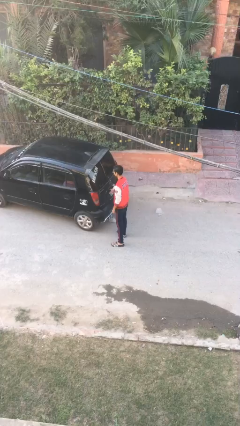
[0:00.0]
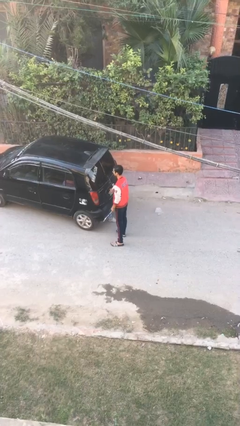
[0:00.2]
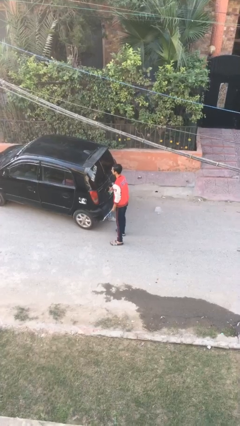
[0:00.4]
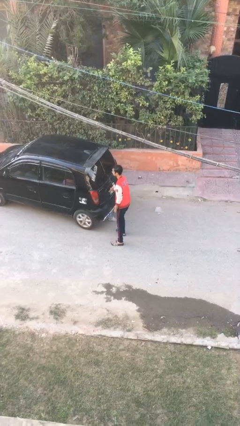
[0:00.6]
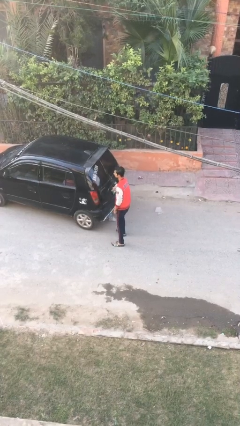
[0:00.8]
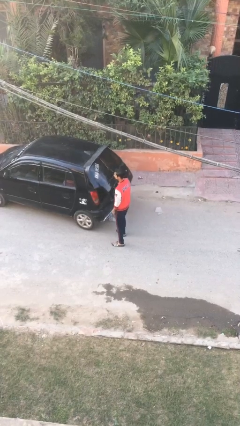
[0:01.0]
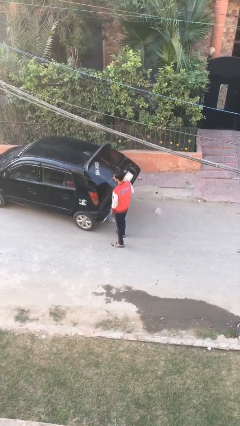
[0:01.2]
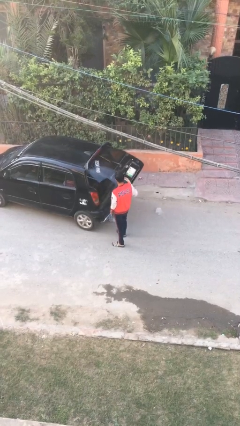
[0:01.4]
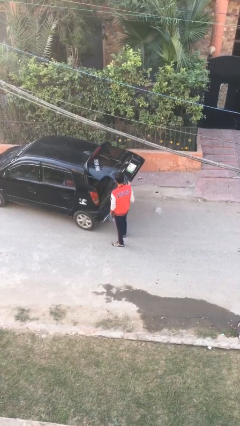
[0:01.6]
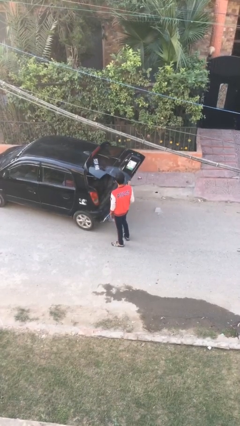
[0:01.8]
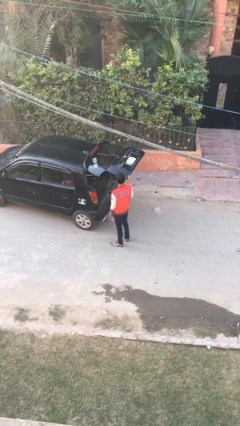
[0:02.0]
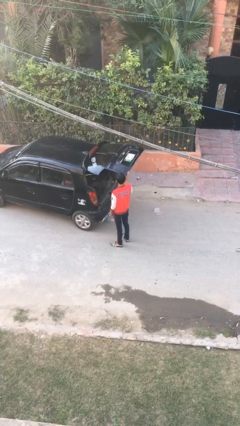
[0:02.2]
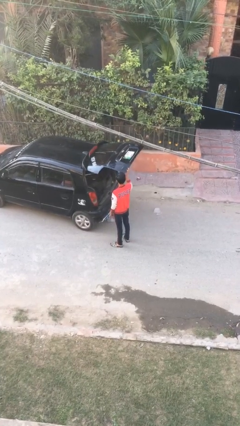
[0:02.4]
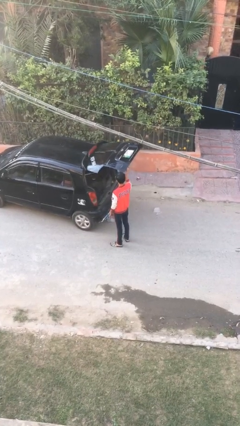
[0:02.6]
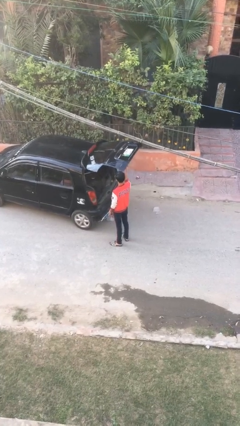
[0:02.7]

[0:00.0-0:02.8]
person opens car trunk

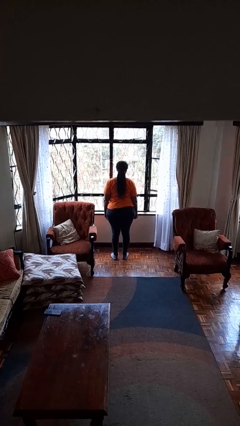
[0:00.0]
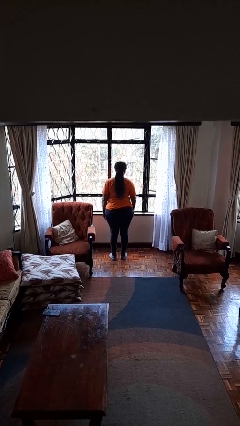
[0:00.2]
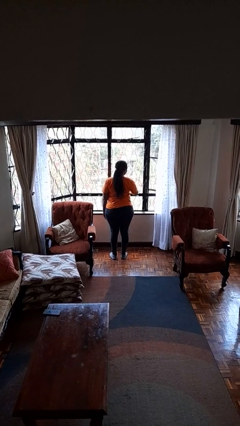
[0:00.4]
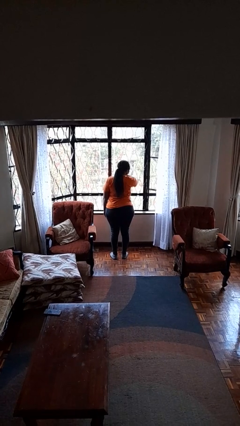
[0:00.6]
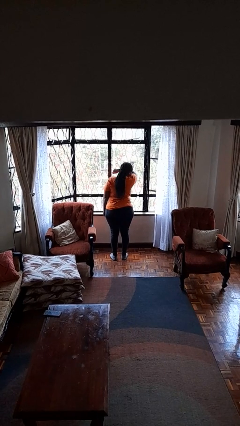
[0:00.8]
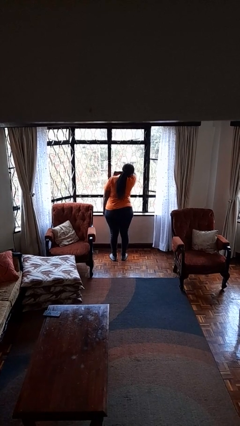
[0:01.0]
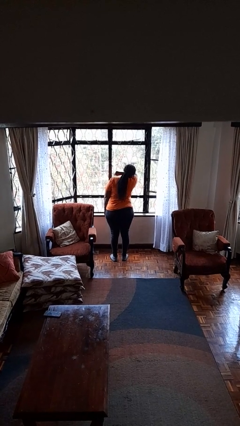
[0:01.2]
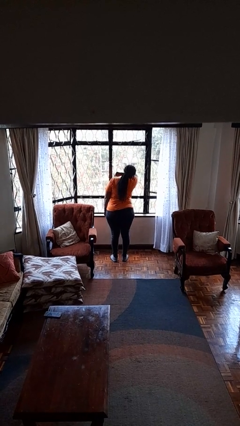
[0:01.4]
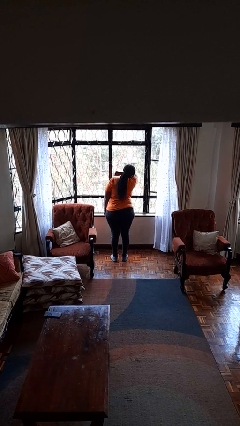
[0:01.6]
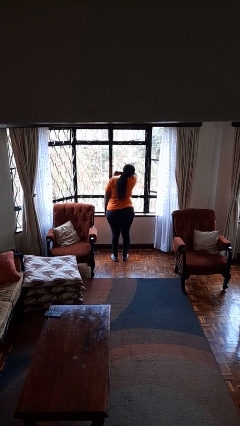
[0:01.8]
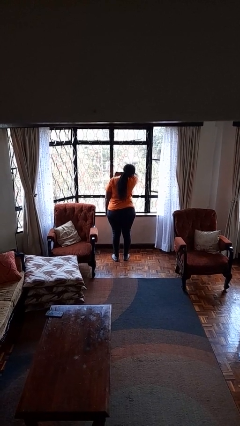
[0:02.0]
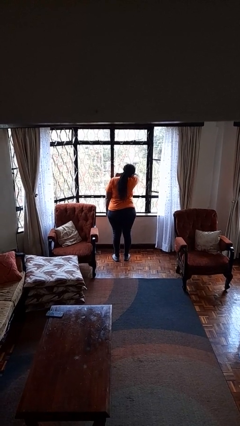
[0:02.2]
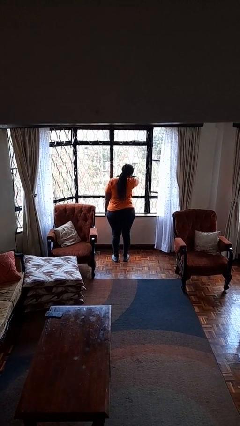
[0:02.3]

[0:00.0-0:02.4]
person sneezes into arm

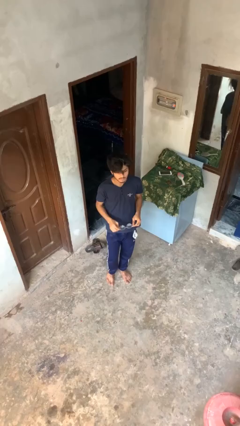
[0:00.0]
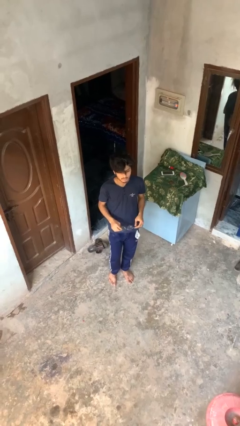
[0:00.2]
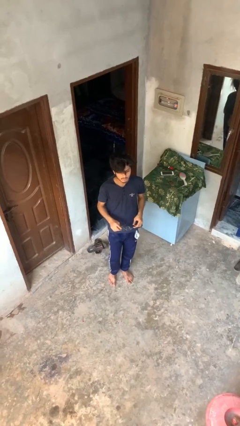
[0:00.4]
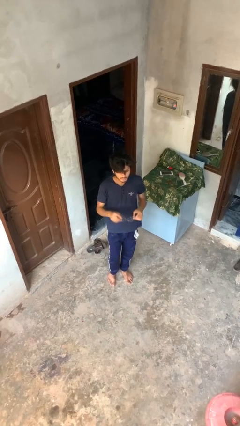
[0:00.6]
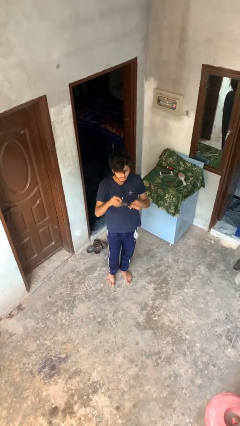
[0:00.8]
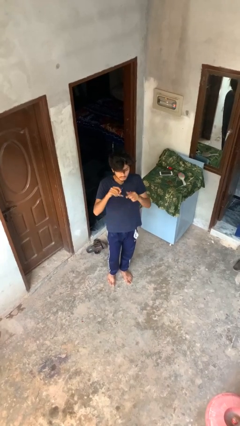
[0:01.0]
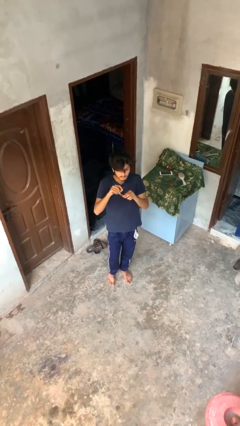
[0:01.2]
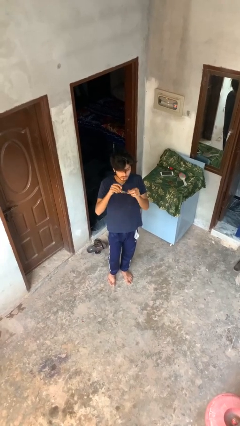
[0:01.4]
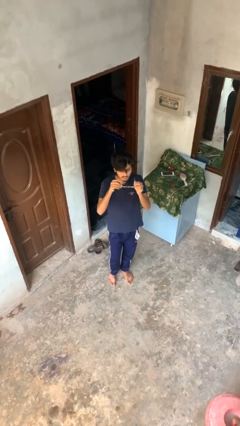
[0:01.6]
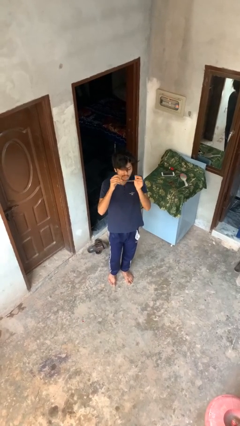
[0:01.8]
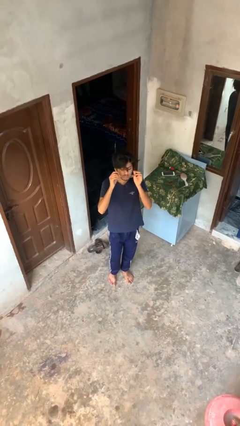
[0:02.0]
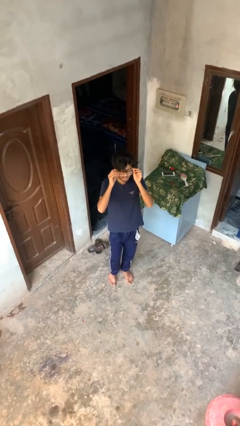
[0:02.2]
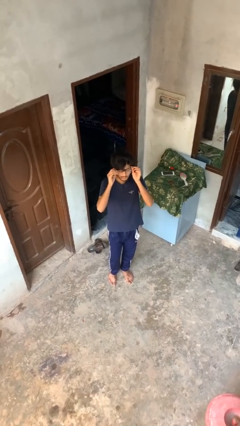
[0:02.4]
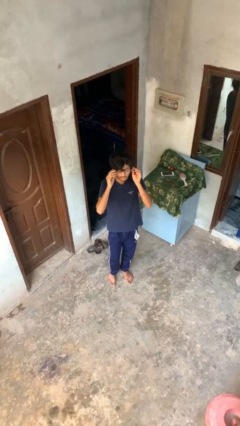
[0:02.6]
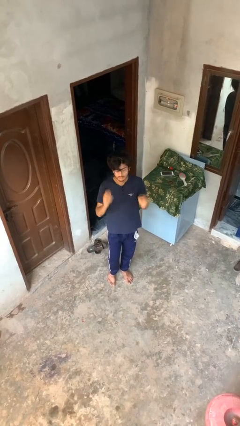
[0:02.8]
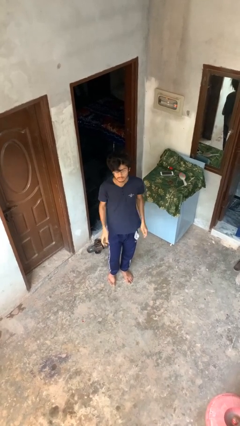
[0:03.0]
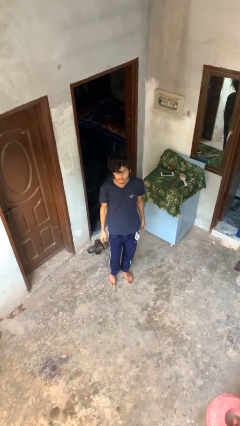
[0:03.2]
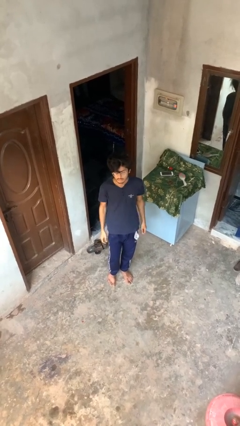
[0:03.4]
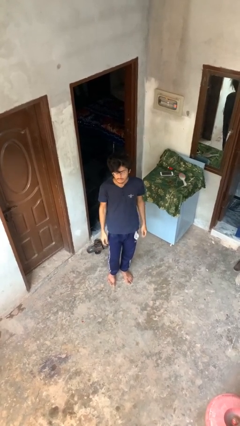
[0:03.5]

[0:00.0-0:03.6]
person puts on glasses

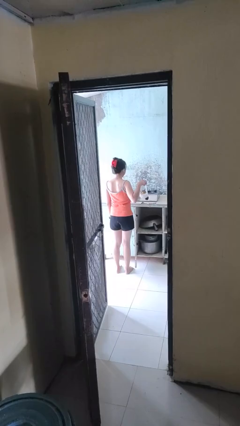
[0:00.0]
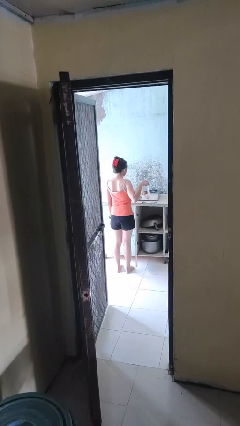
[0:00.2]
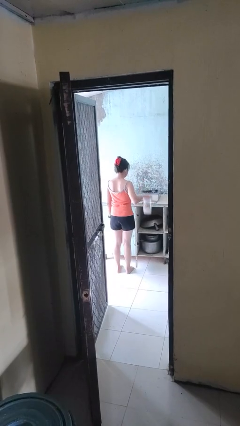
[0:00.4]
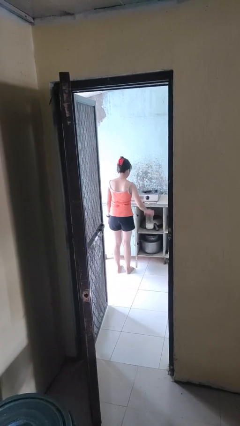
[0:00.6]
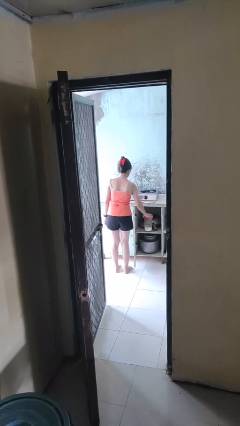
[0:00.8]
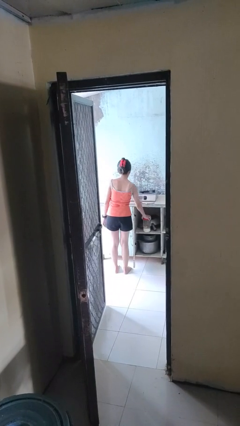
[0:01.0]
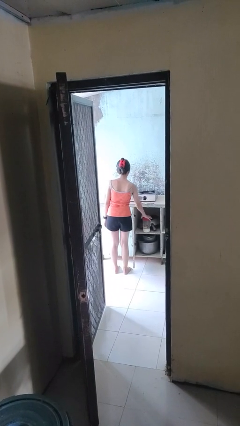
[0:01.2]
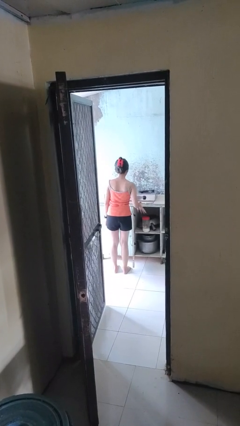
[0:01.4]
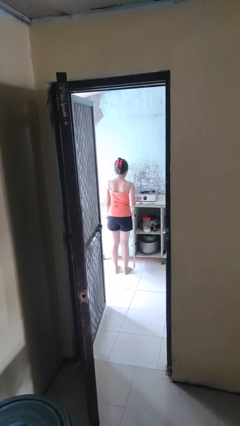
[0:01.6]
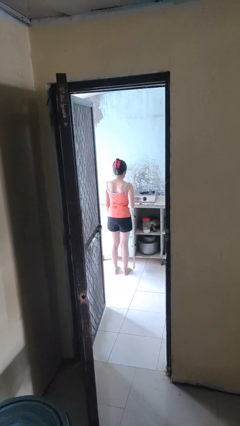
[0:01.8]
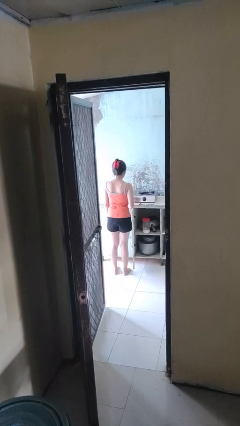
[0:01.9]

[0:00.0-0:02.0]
person puts down object into cabinet

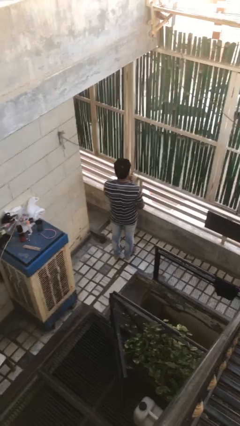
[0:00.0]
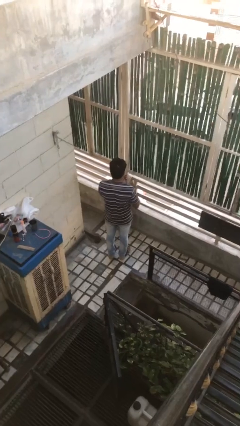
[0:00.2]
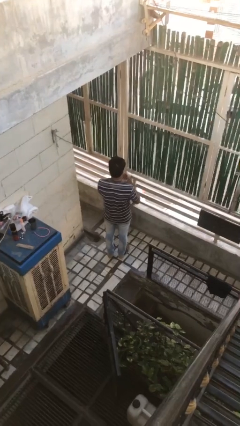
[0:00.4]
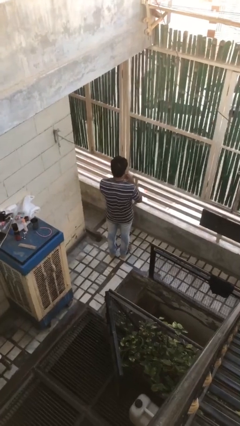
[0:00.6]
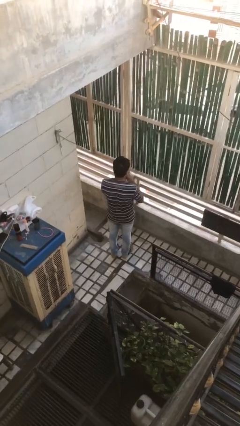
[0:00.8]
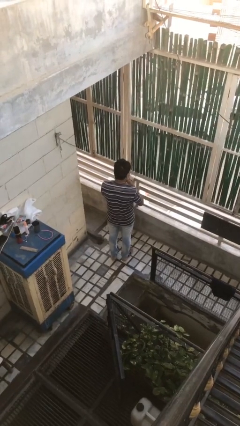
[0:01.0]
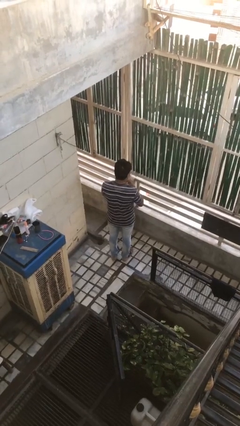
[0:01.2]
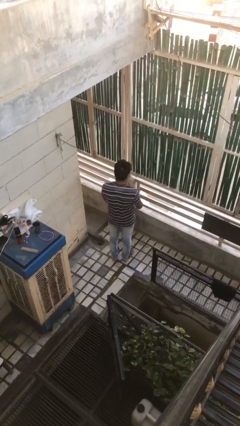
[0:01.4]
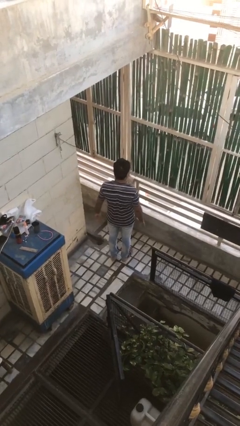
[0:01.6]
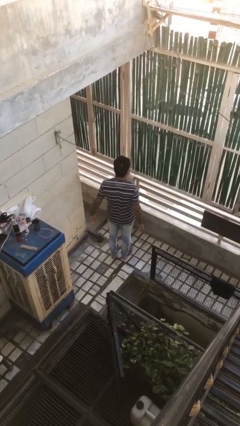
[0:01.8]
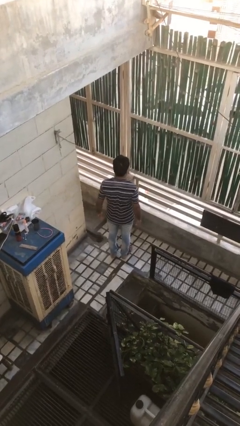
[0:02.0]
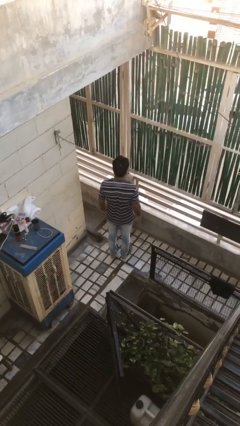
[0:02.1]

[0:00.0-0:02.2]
person puts on ring

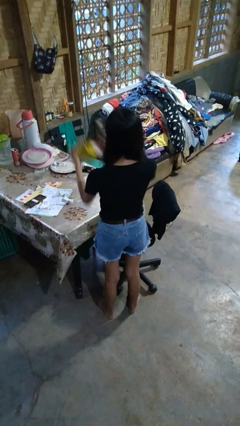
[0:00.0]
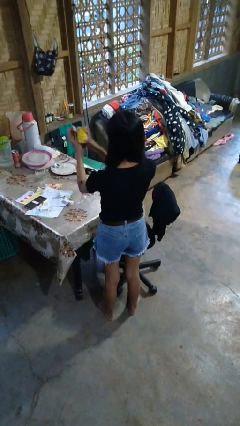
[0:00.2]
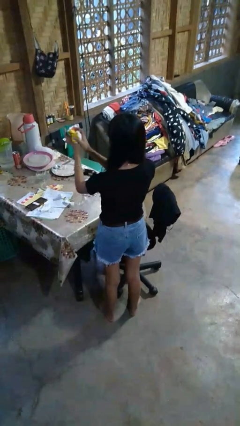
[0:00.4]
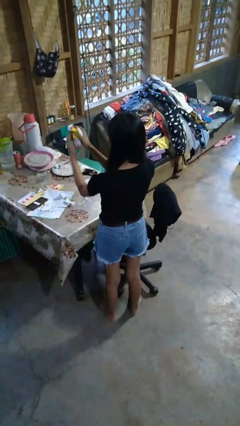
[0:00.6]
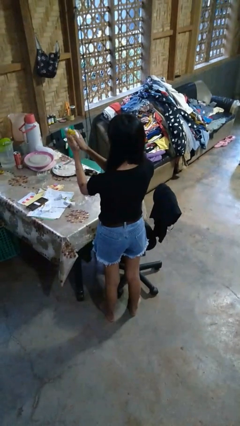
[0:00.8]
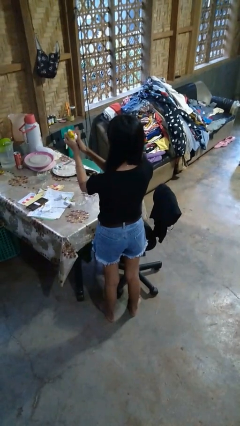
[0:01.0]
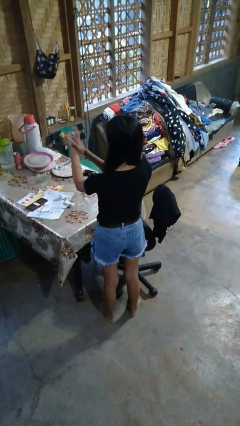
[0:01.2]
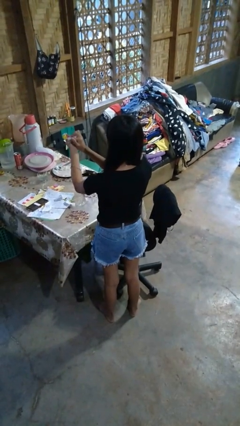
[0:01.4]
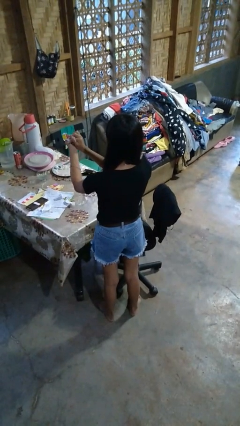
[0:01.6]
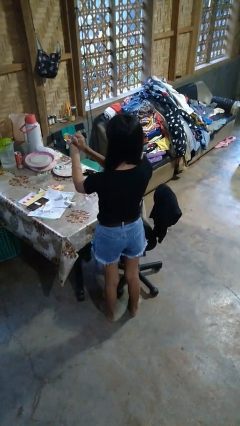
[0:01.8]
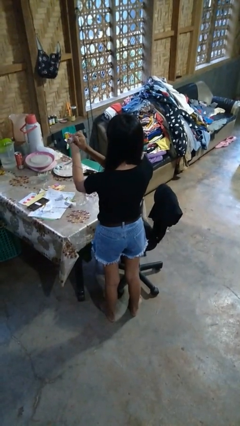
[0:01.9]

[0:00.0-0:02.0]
person crumples paper

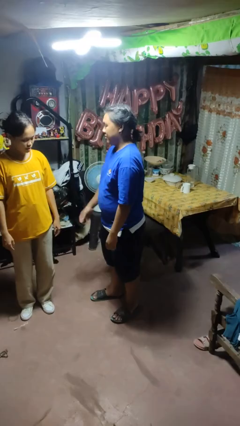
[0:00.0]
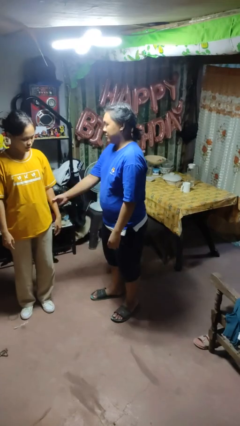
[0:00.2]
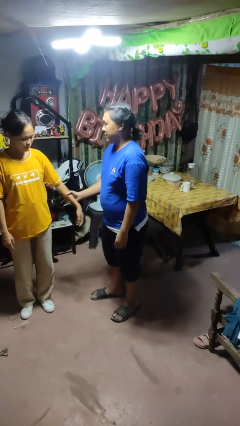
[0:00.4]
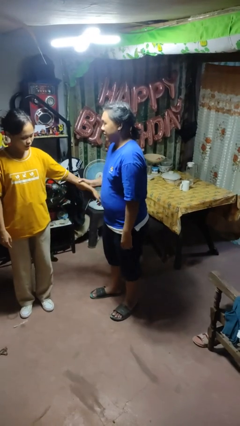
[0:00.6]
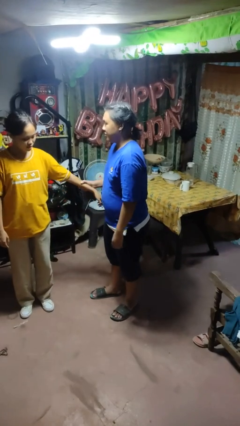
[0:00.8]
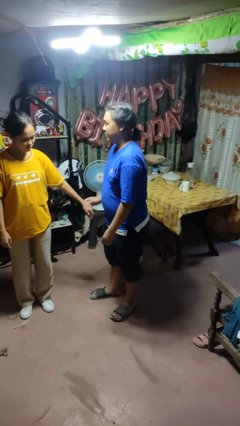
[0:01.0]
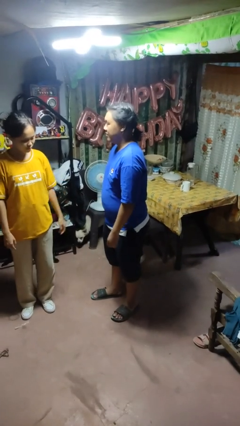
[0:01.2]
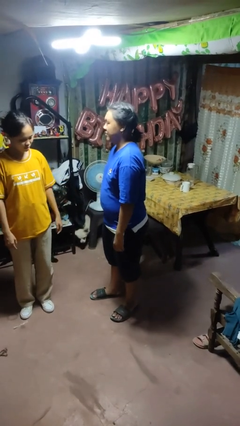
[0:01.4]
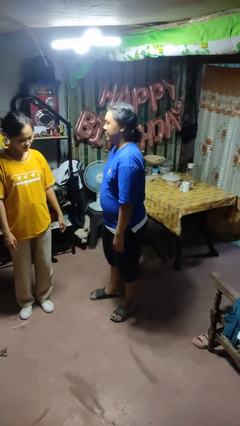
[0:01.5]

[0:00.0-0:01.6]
person grabs person by forearm

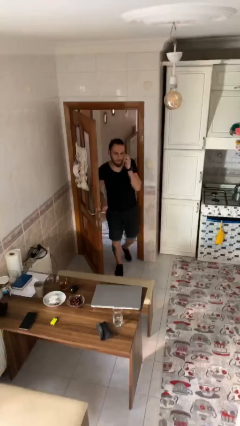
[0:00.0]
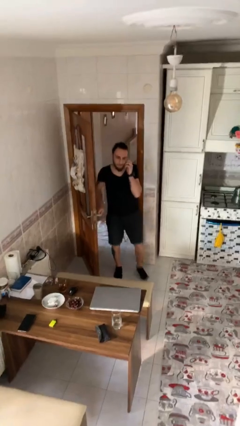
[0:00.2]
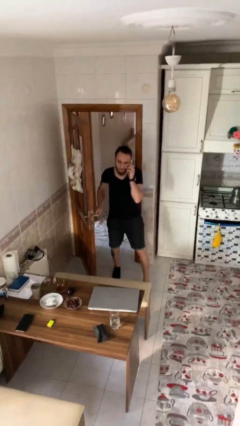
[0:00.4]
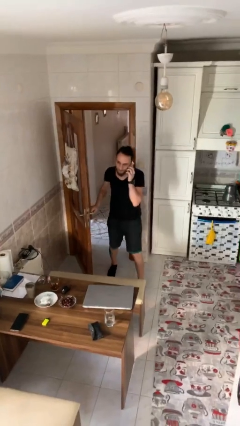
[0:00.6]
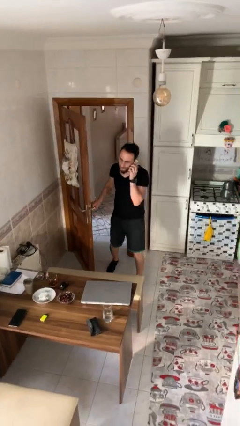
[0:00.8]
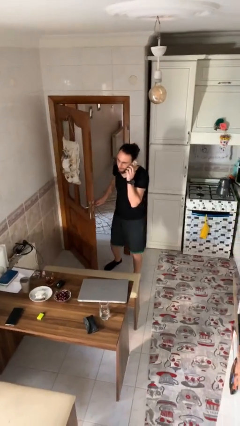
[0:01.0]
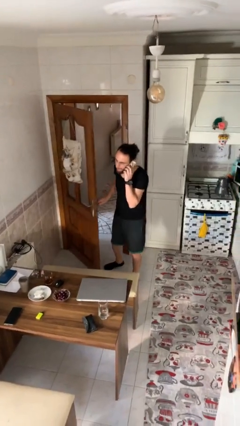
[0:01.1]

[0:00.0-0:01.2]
person enters scene through structure
